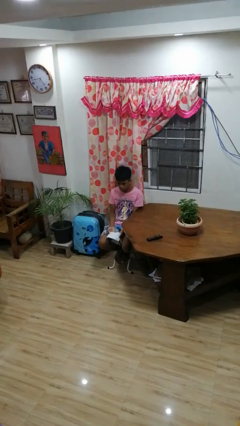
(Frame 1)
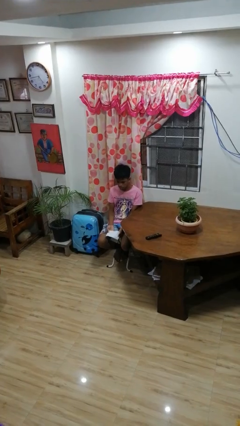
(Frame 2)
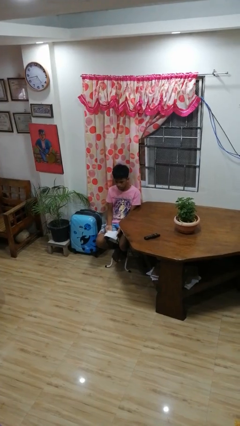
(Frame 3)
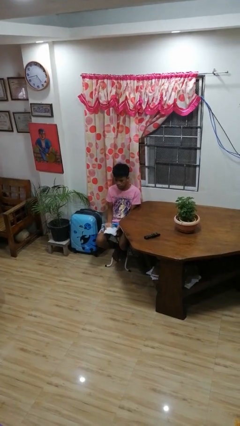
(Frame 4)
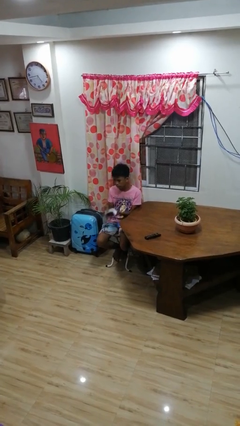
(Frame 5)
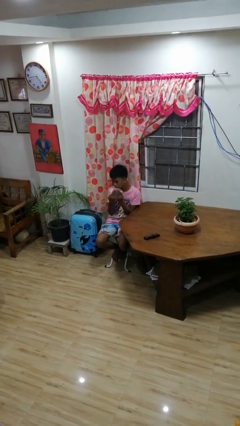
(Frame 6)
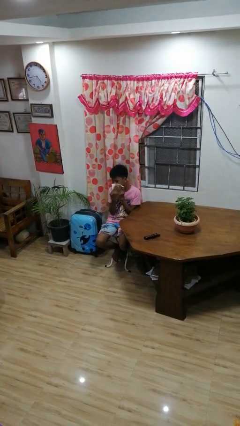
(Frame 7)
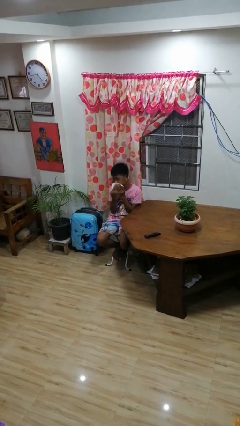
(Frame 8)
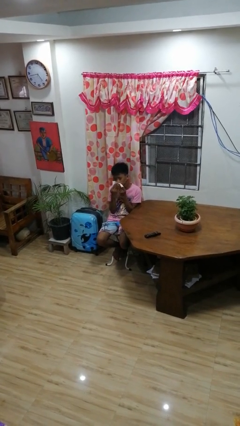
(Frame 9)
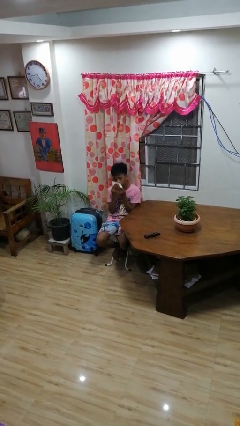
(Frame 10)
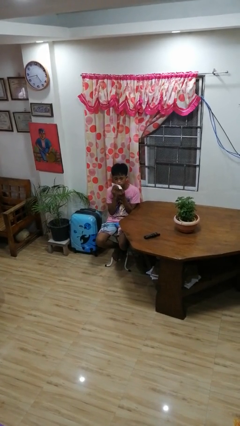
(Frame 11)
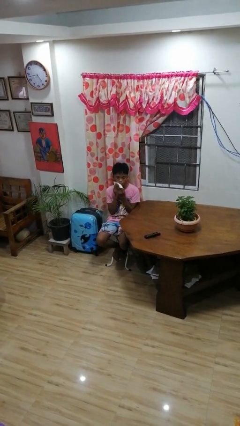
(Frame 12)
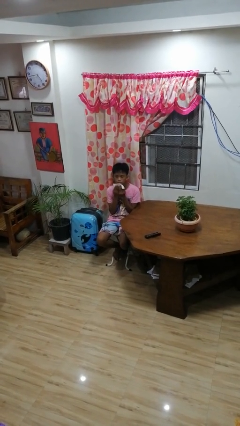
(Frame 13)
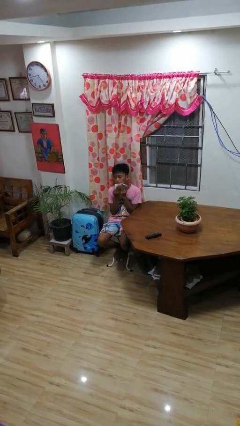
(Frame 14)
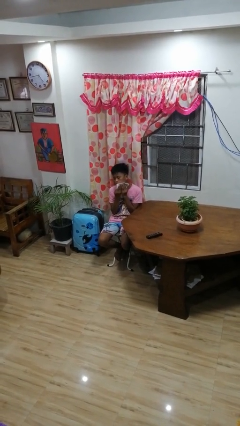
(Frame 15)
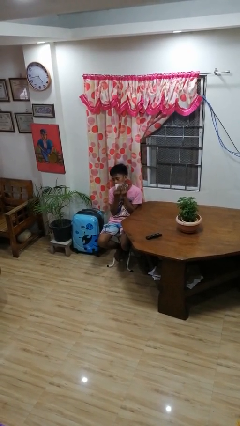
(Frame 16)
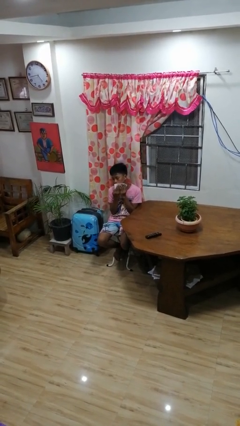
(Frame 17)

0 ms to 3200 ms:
person wipes mouth with napkin

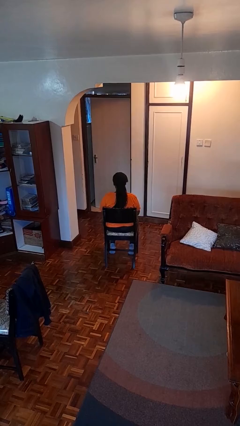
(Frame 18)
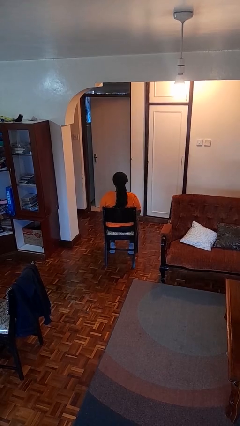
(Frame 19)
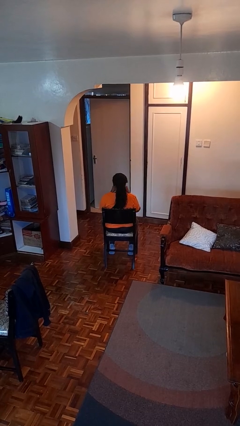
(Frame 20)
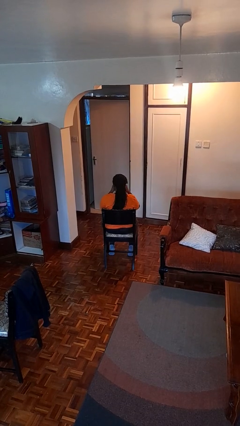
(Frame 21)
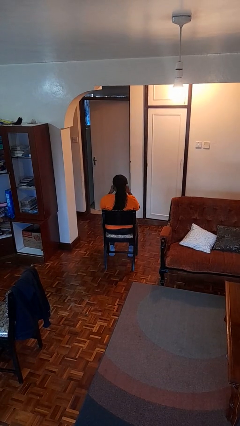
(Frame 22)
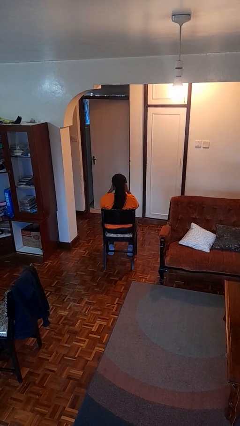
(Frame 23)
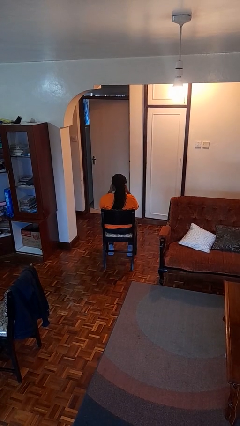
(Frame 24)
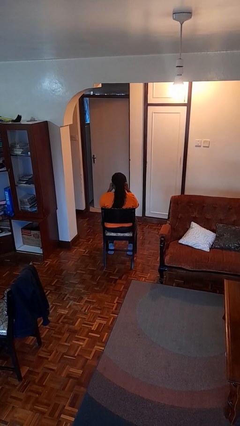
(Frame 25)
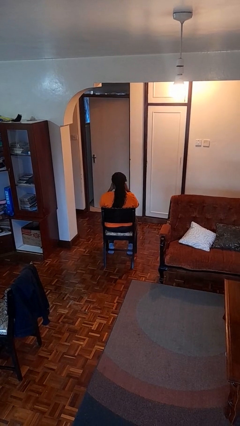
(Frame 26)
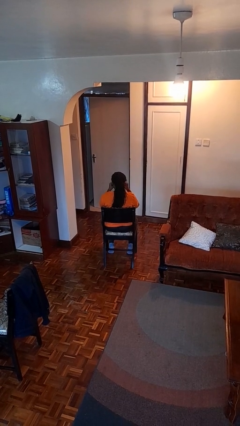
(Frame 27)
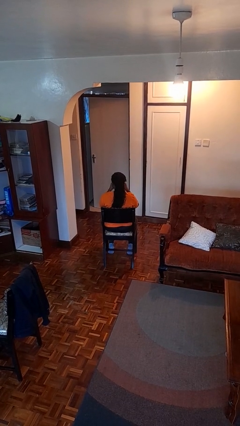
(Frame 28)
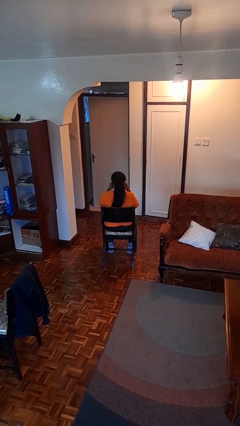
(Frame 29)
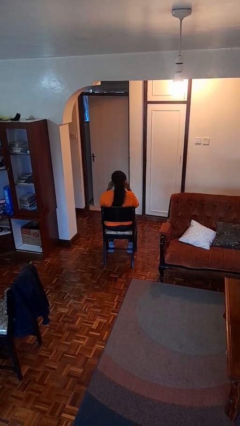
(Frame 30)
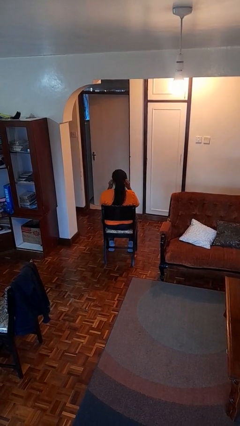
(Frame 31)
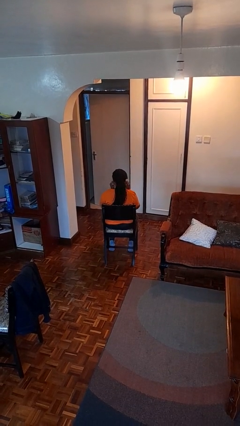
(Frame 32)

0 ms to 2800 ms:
person rubs eyes

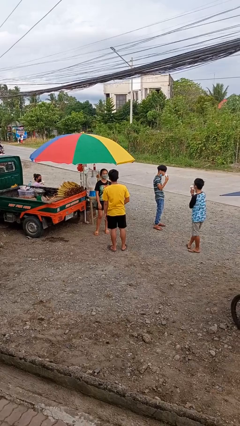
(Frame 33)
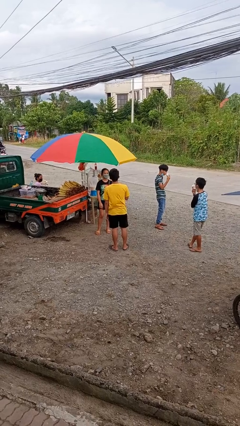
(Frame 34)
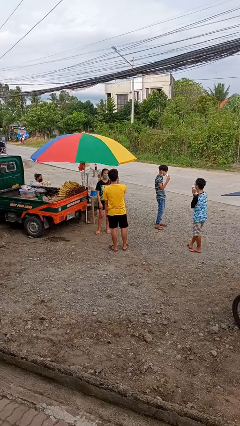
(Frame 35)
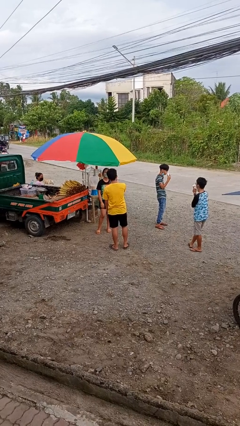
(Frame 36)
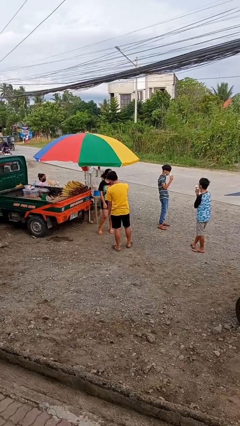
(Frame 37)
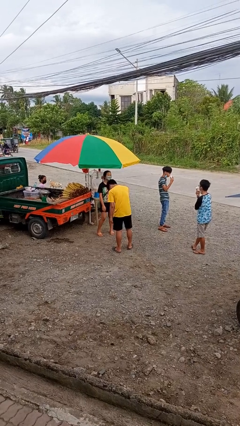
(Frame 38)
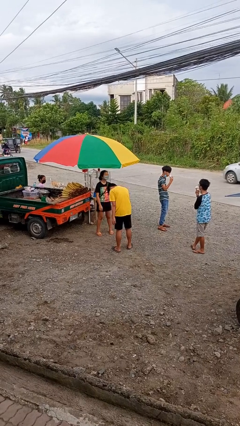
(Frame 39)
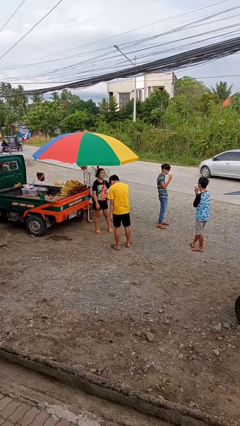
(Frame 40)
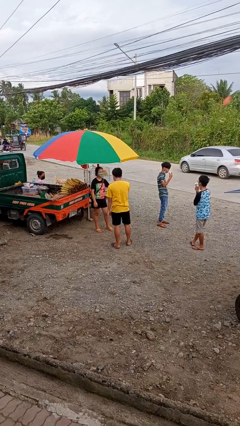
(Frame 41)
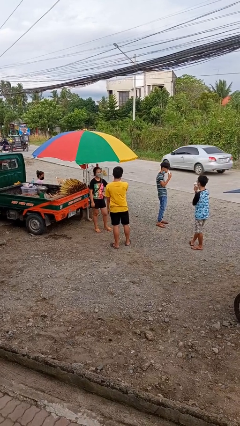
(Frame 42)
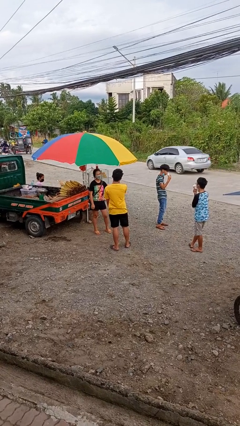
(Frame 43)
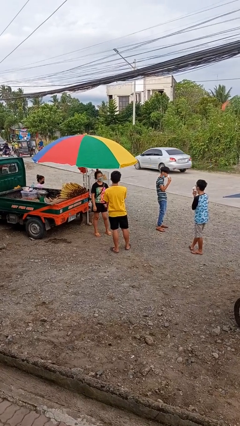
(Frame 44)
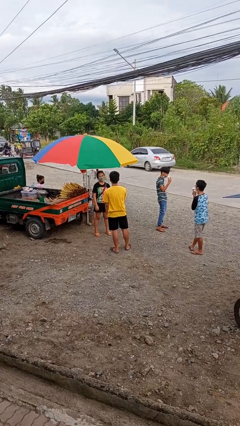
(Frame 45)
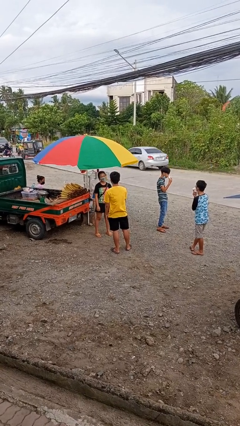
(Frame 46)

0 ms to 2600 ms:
person laughs with person

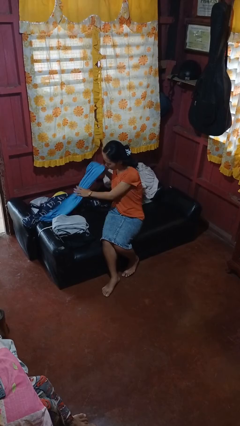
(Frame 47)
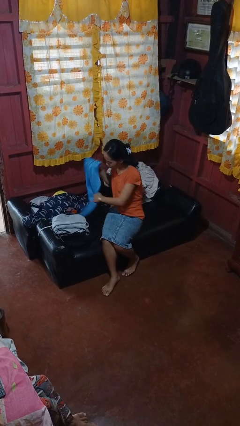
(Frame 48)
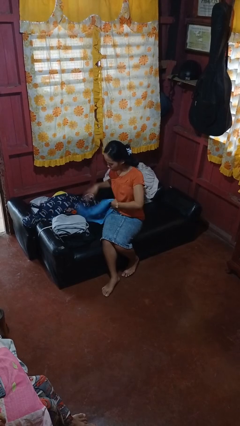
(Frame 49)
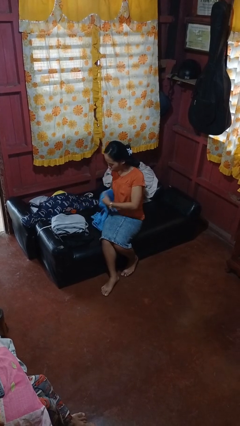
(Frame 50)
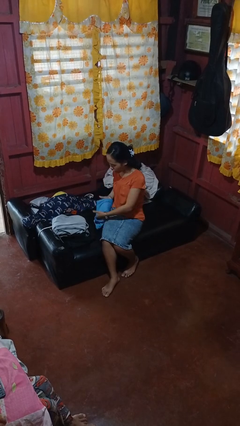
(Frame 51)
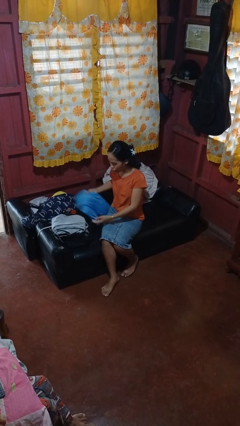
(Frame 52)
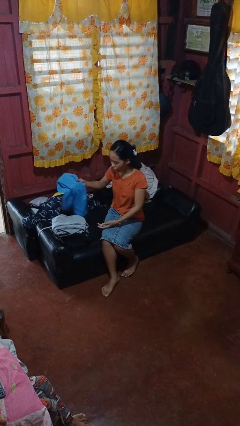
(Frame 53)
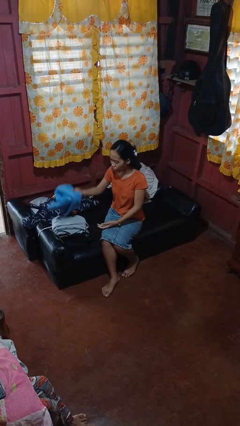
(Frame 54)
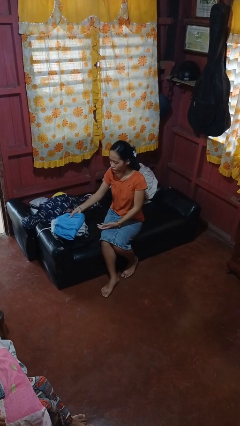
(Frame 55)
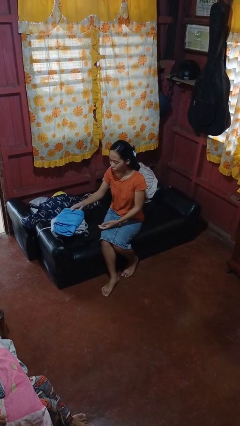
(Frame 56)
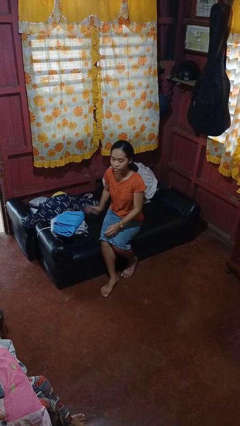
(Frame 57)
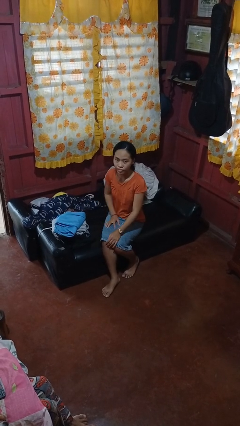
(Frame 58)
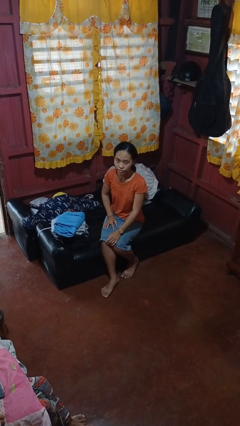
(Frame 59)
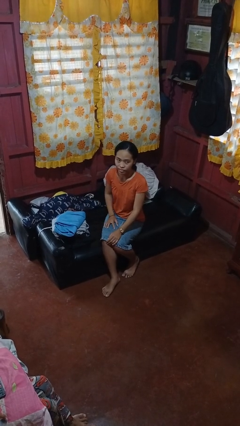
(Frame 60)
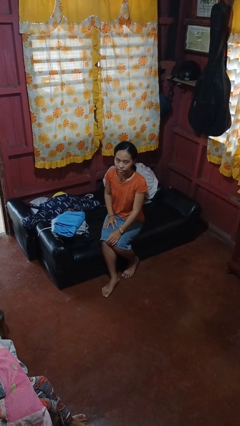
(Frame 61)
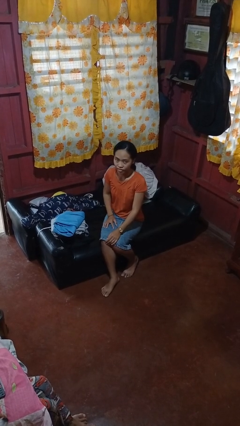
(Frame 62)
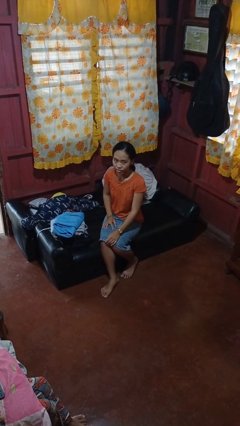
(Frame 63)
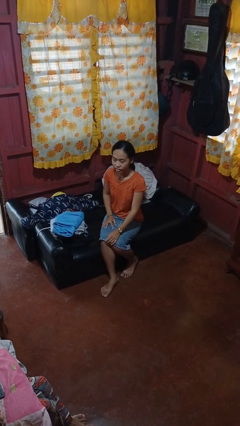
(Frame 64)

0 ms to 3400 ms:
person folds pants

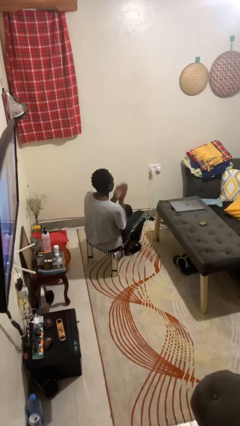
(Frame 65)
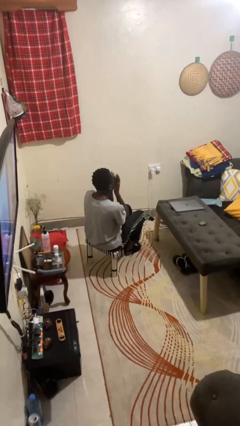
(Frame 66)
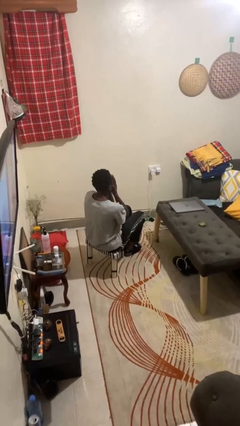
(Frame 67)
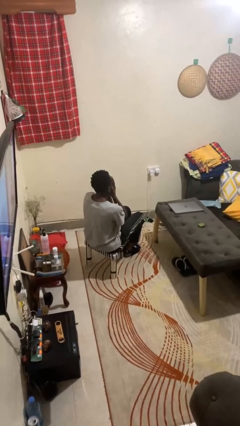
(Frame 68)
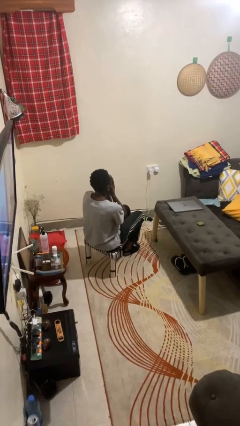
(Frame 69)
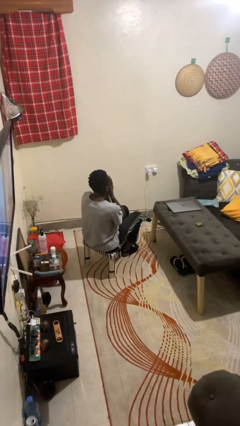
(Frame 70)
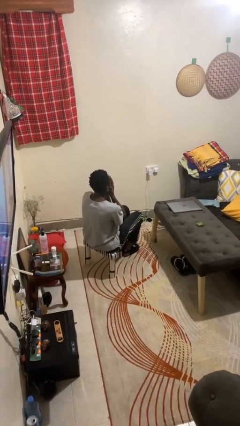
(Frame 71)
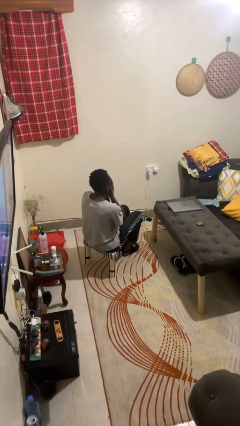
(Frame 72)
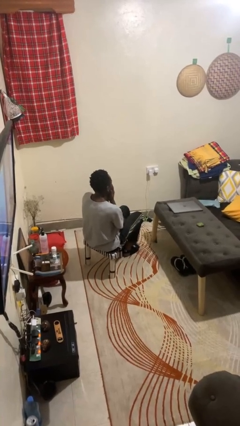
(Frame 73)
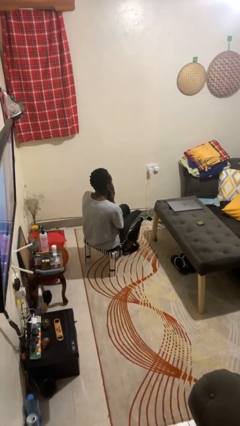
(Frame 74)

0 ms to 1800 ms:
person covers face with hands

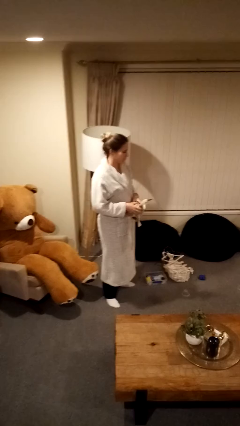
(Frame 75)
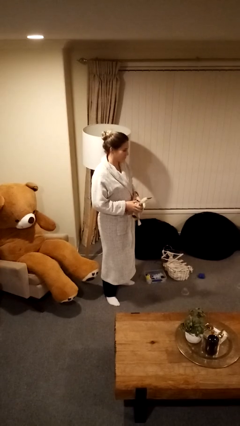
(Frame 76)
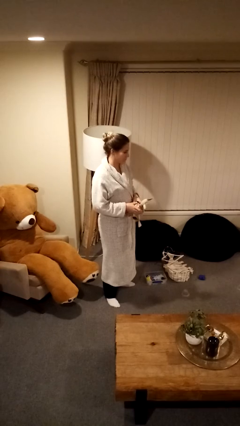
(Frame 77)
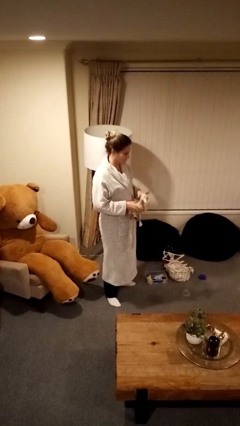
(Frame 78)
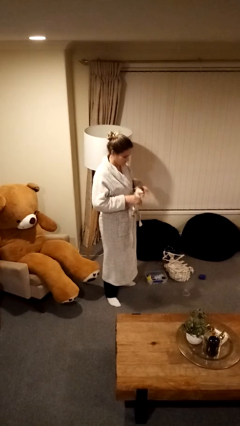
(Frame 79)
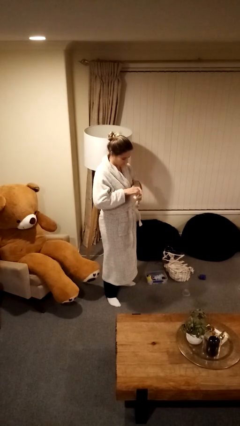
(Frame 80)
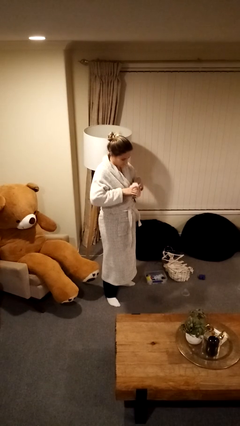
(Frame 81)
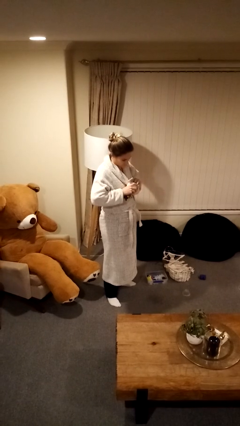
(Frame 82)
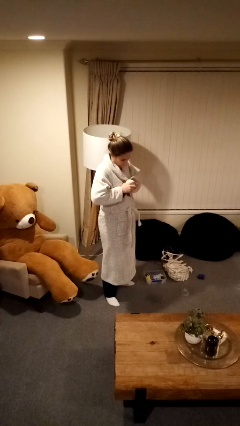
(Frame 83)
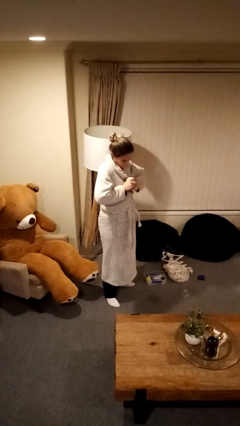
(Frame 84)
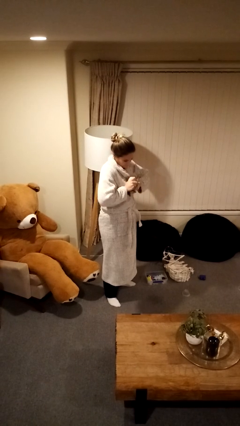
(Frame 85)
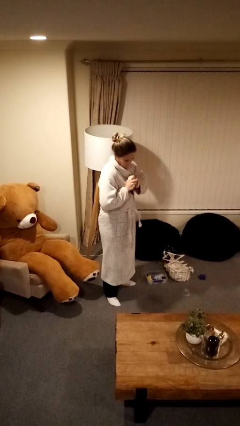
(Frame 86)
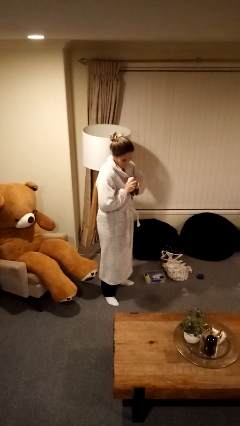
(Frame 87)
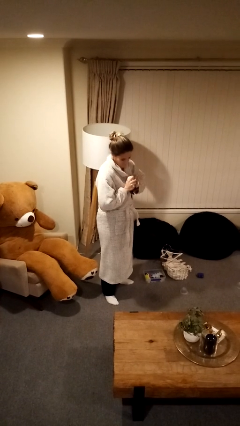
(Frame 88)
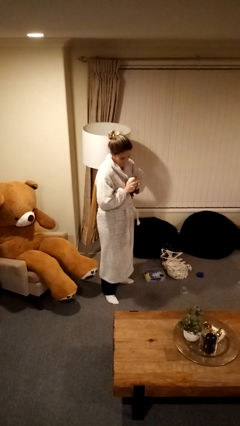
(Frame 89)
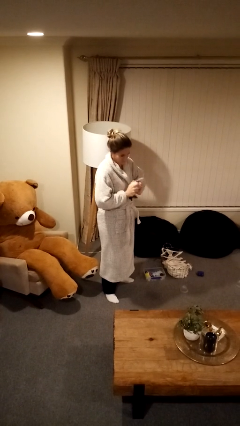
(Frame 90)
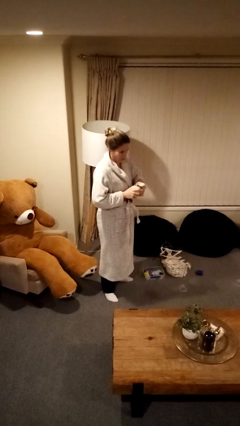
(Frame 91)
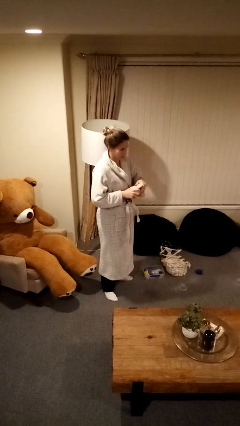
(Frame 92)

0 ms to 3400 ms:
person squeezes object
